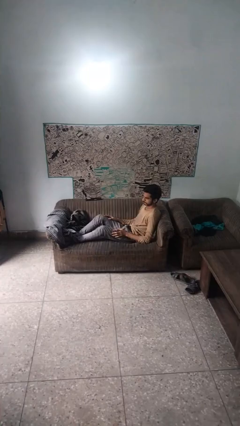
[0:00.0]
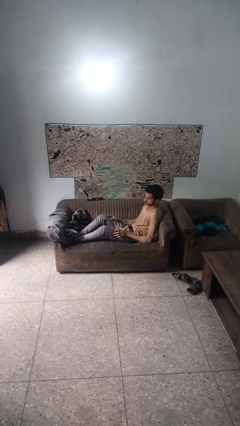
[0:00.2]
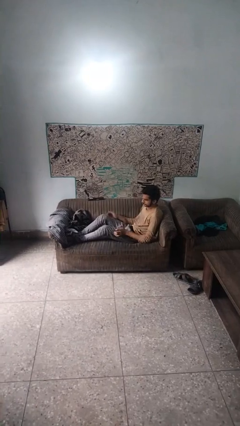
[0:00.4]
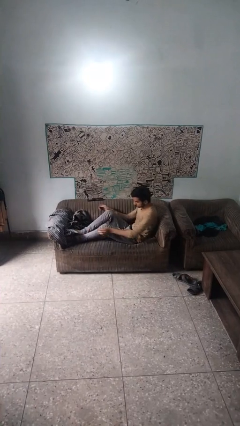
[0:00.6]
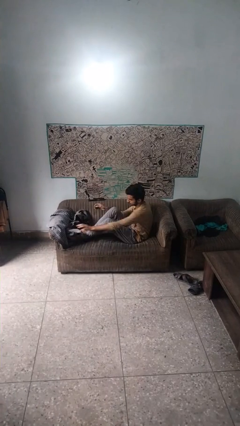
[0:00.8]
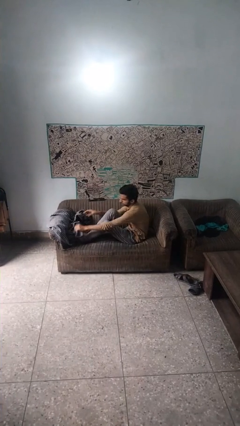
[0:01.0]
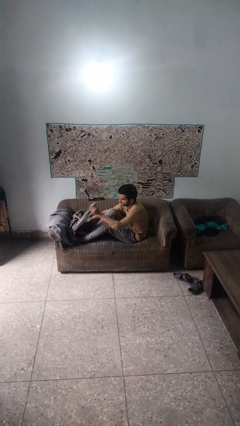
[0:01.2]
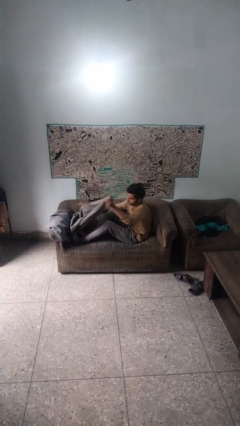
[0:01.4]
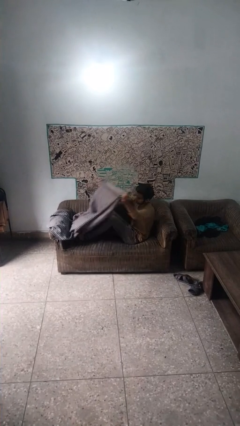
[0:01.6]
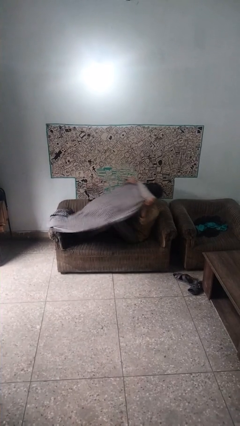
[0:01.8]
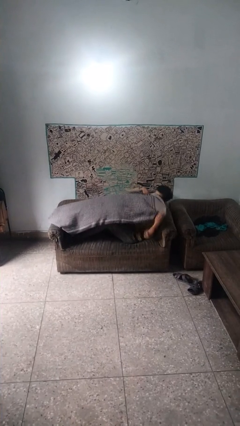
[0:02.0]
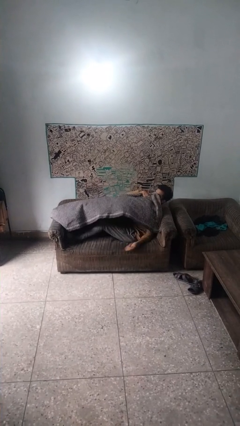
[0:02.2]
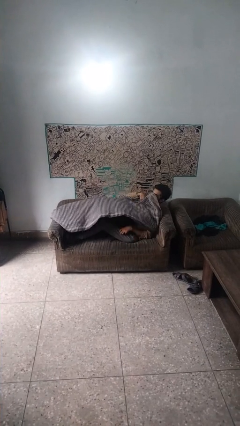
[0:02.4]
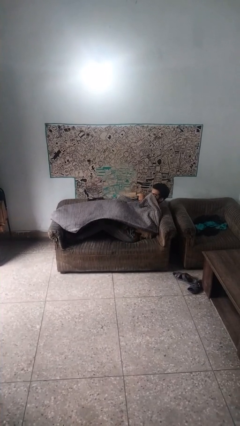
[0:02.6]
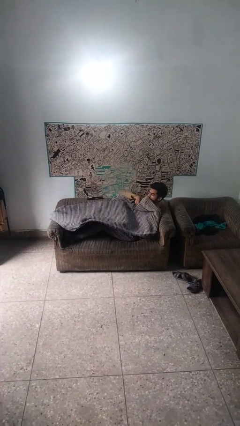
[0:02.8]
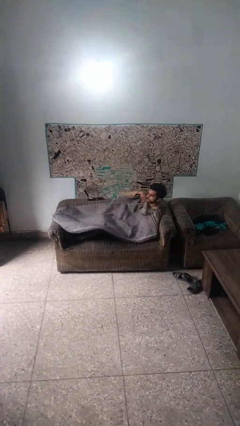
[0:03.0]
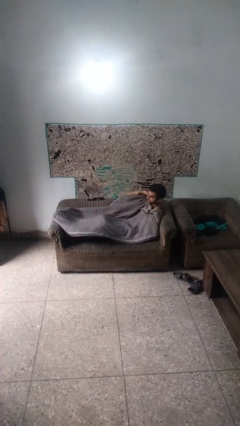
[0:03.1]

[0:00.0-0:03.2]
person covers with blanket

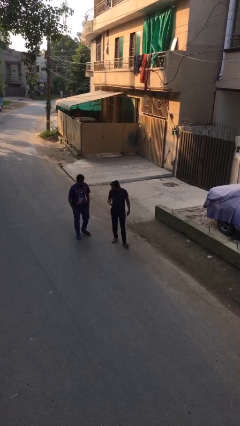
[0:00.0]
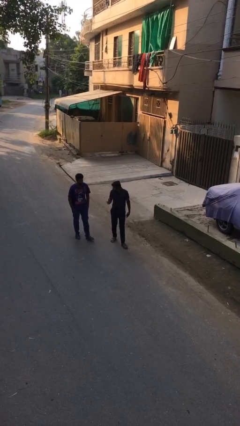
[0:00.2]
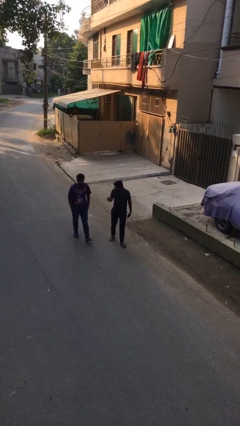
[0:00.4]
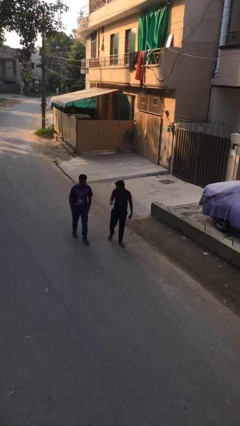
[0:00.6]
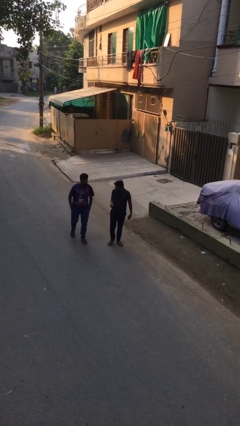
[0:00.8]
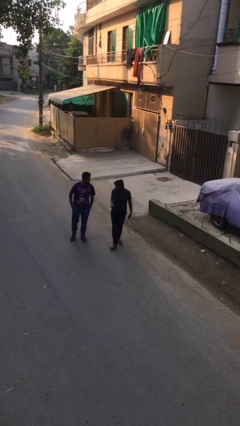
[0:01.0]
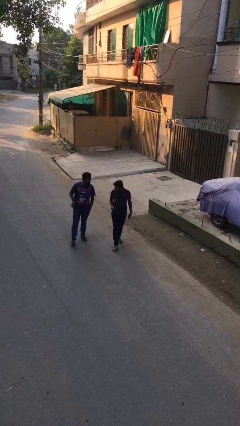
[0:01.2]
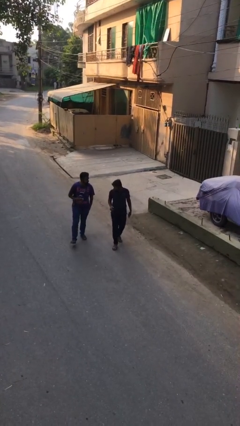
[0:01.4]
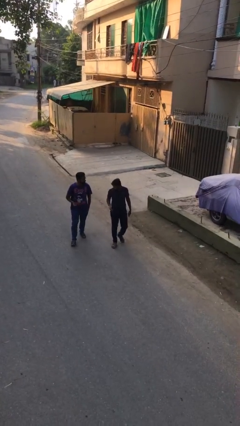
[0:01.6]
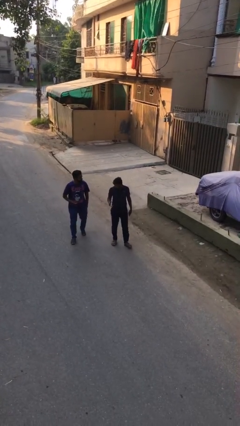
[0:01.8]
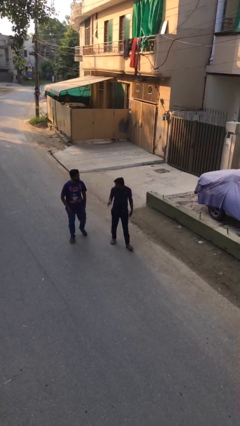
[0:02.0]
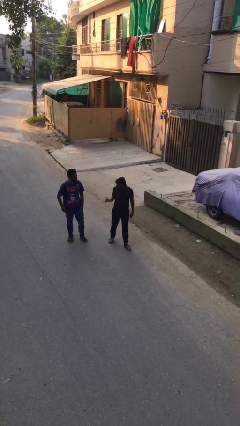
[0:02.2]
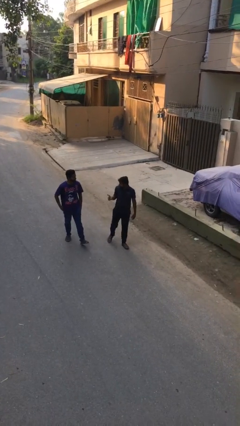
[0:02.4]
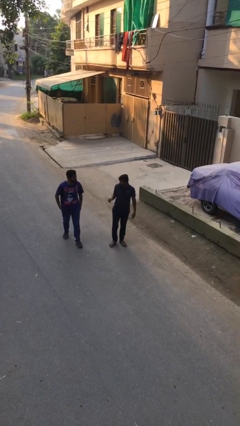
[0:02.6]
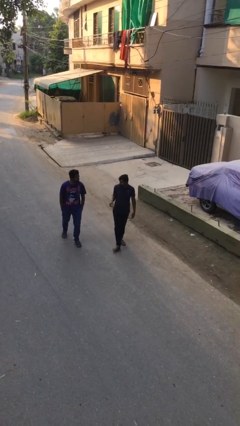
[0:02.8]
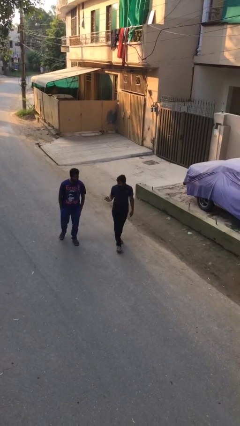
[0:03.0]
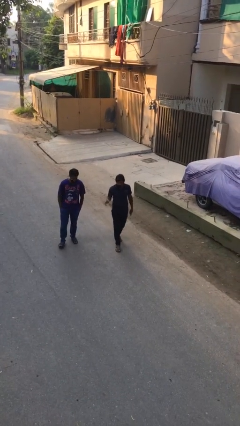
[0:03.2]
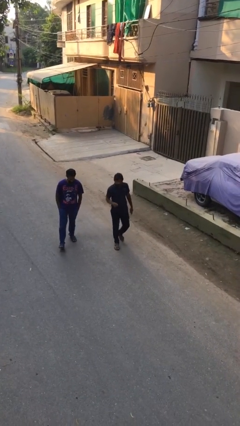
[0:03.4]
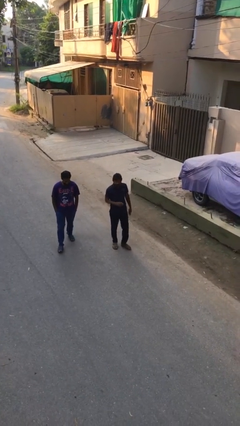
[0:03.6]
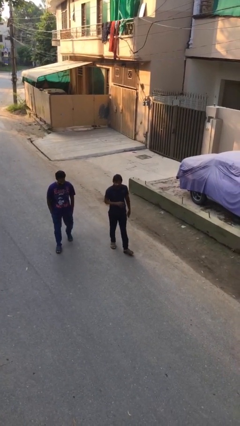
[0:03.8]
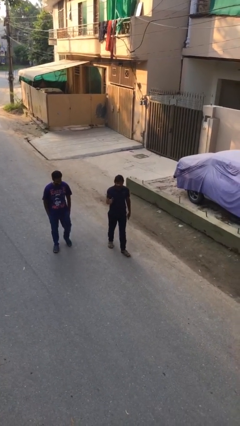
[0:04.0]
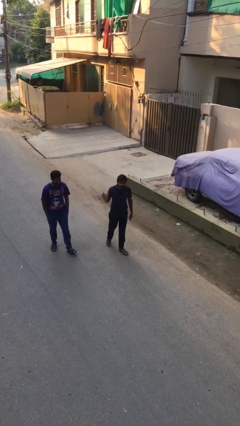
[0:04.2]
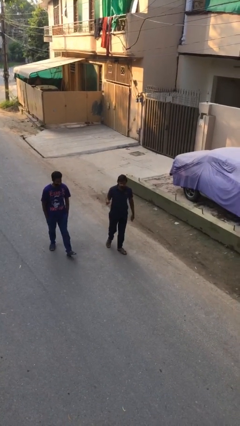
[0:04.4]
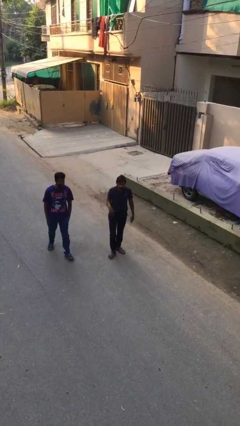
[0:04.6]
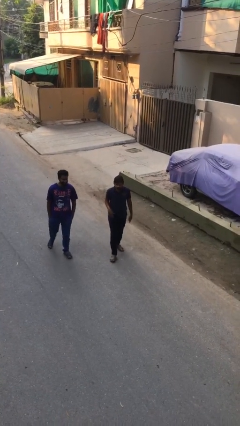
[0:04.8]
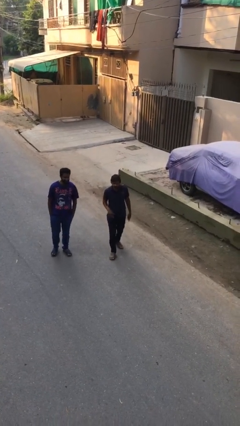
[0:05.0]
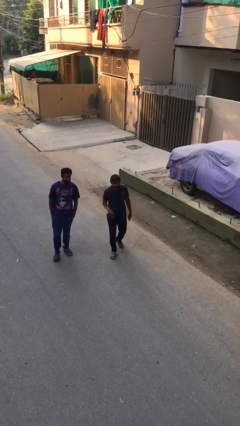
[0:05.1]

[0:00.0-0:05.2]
person talks to person

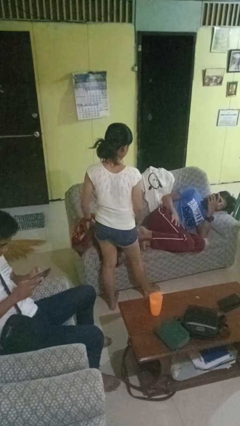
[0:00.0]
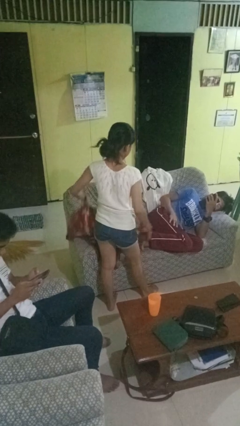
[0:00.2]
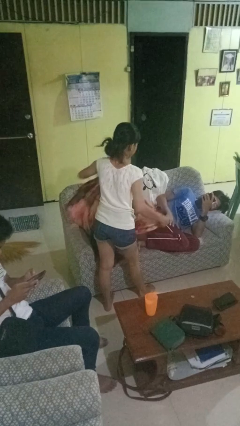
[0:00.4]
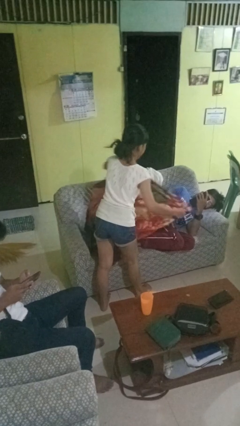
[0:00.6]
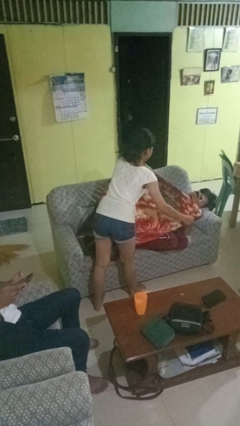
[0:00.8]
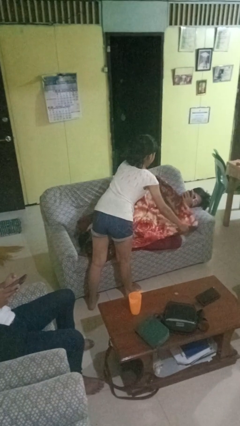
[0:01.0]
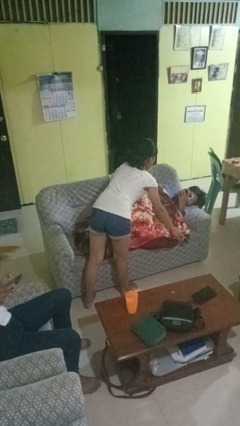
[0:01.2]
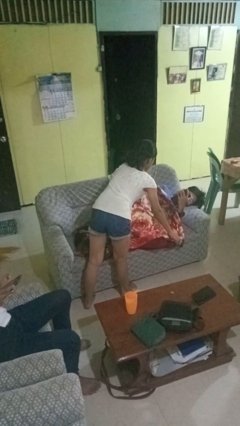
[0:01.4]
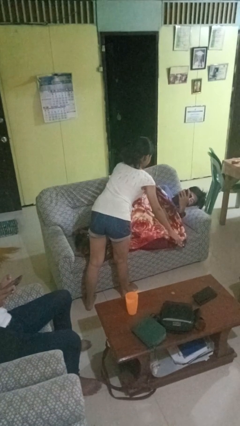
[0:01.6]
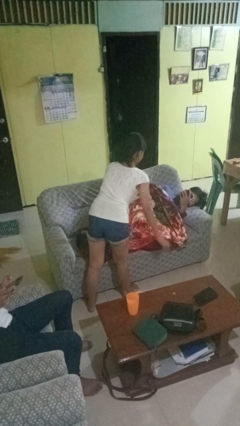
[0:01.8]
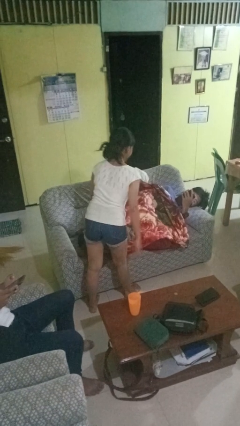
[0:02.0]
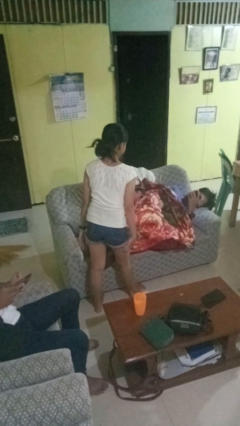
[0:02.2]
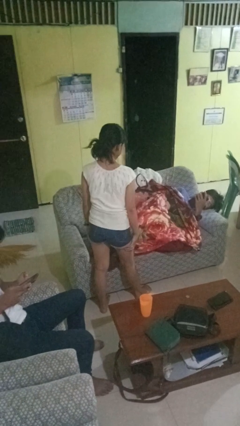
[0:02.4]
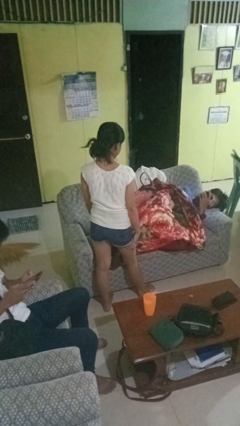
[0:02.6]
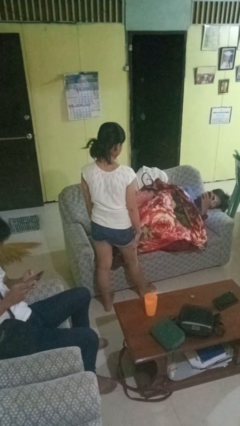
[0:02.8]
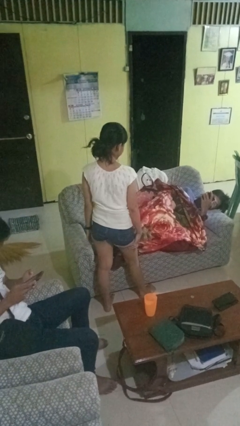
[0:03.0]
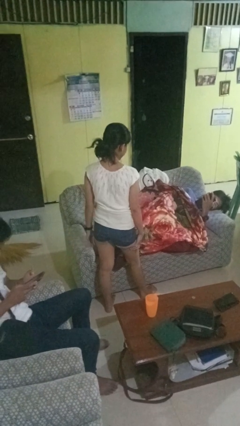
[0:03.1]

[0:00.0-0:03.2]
person covers friend with blanket

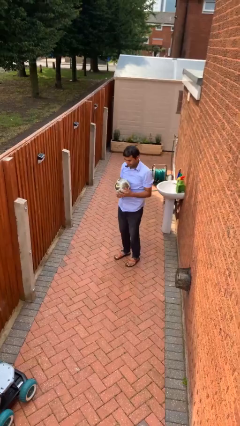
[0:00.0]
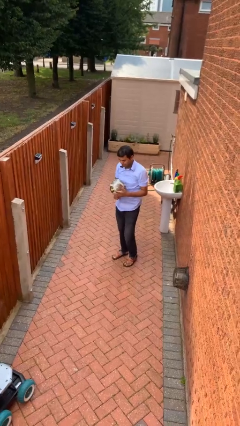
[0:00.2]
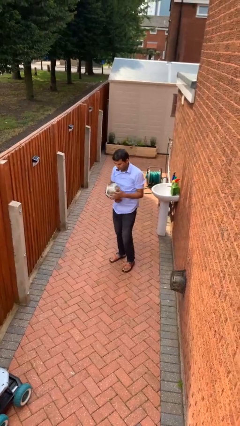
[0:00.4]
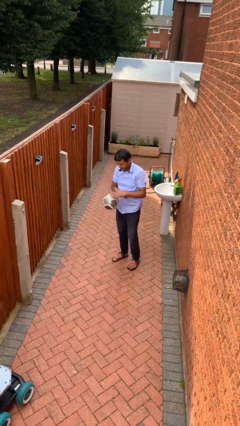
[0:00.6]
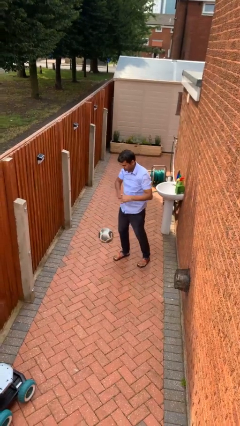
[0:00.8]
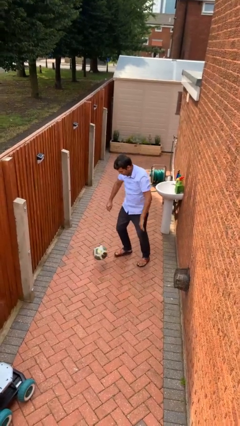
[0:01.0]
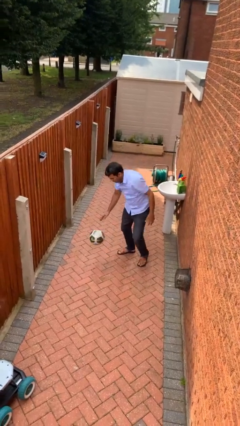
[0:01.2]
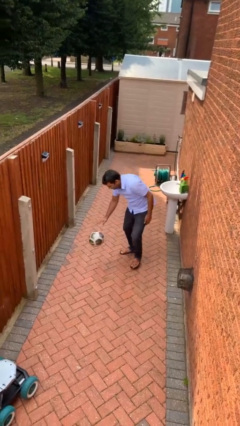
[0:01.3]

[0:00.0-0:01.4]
person drops object

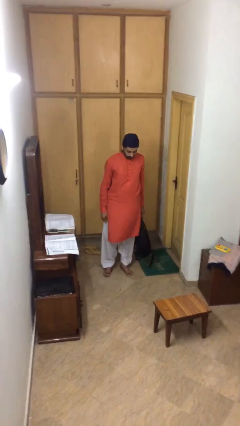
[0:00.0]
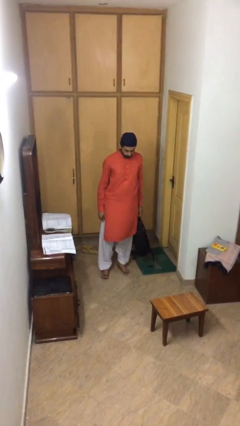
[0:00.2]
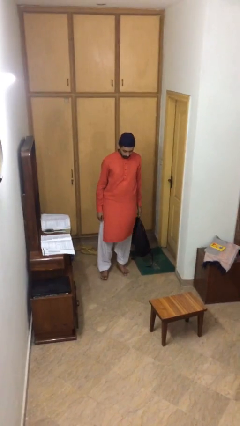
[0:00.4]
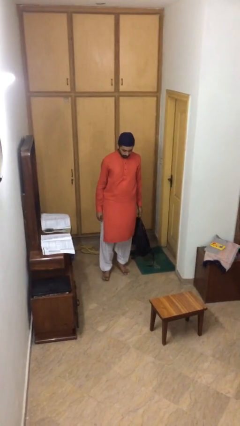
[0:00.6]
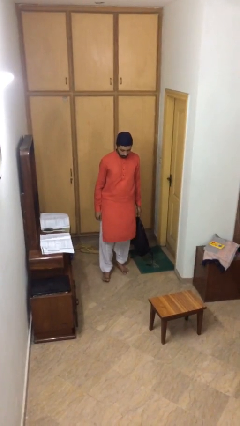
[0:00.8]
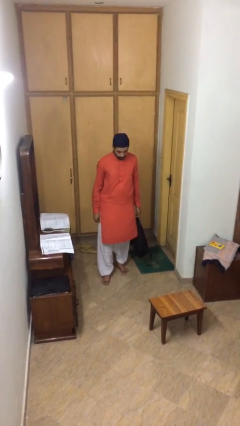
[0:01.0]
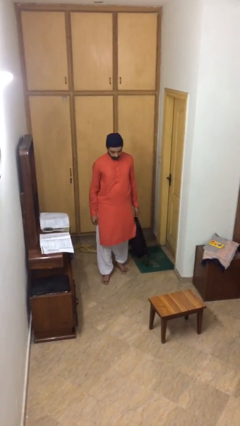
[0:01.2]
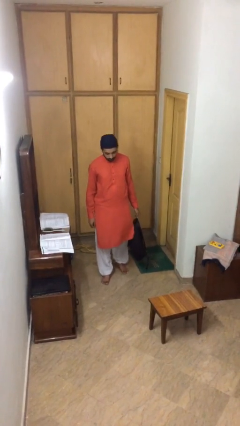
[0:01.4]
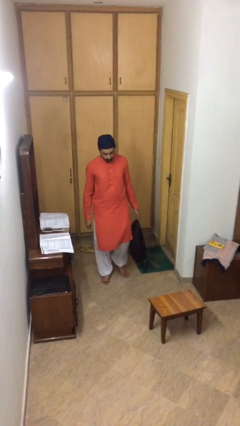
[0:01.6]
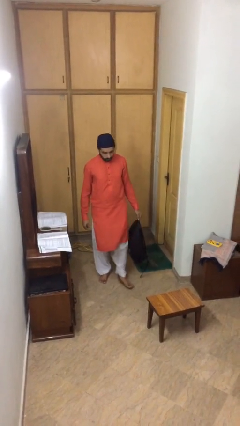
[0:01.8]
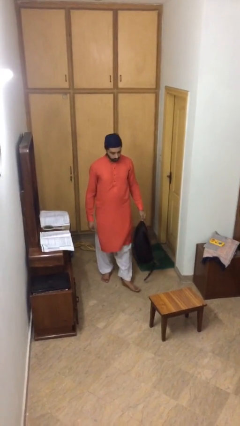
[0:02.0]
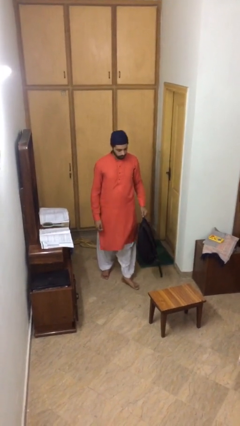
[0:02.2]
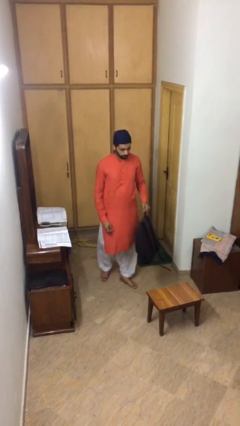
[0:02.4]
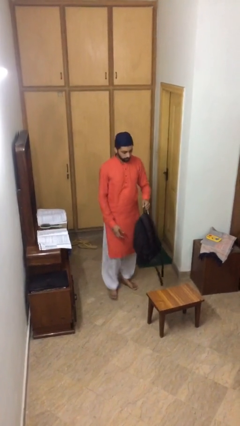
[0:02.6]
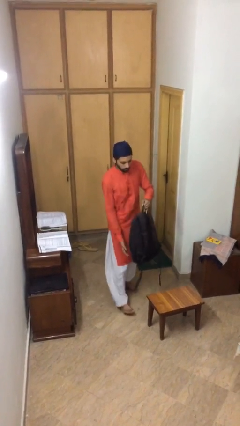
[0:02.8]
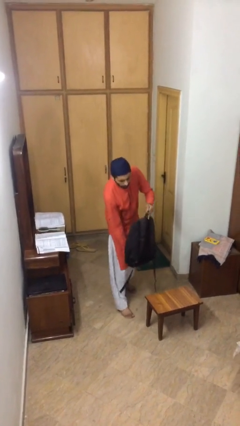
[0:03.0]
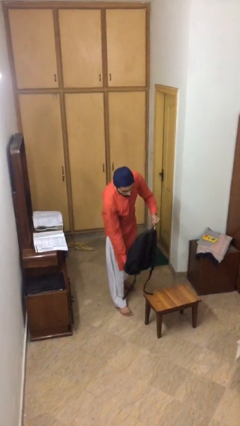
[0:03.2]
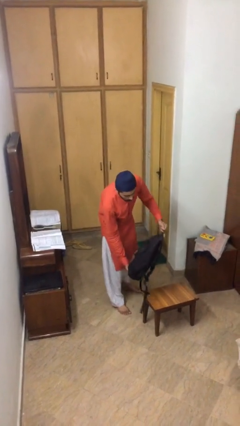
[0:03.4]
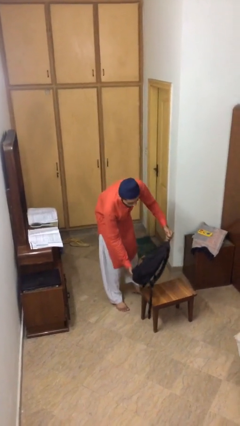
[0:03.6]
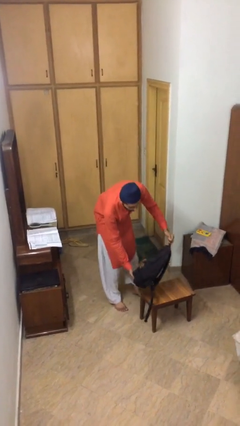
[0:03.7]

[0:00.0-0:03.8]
person puts down object on table

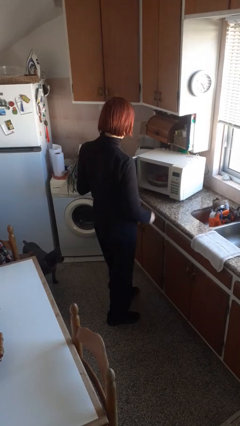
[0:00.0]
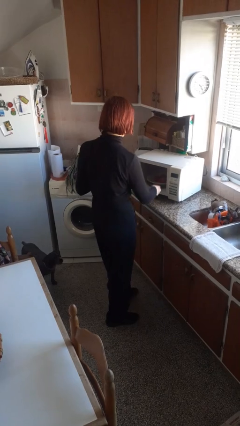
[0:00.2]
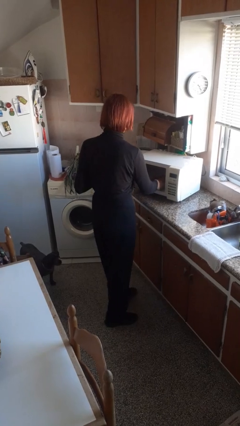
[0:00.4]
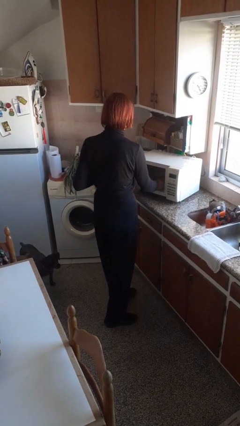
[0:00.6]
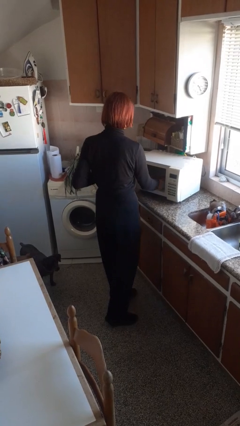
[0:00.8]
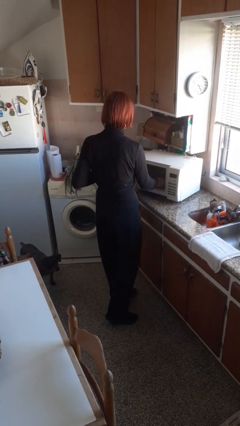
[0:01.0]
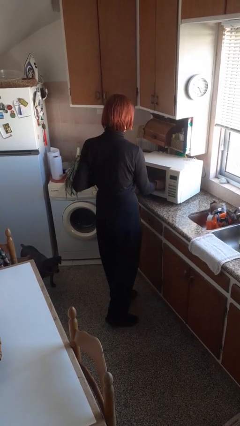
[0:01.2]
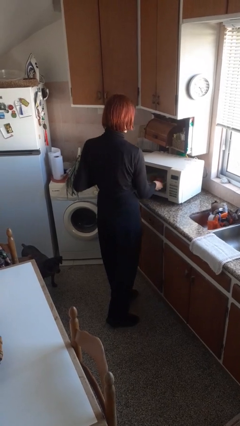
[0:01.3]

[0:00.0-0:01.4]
person takes object from microwave
